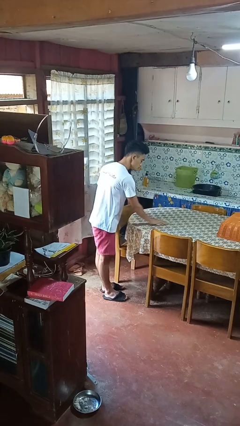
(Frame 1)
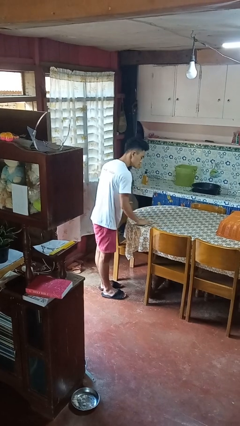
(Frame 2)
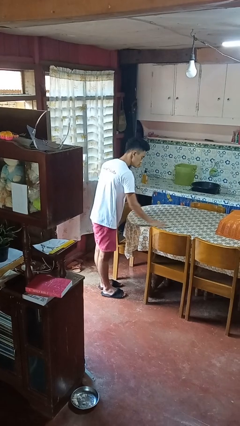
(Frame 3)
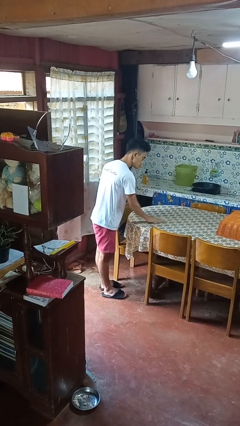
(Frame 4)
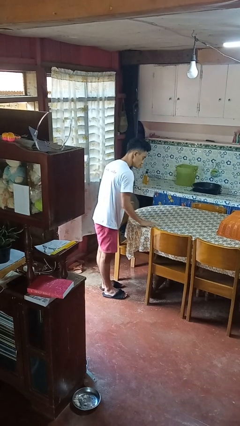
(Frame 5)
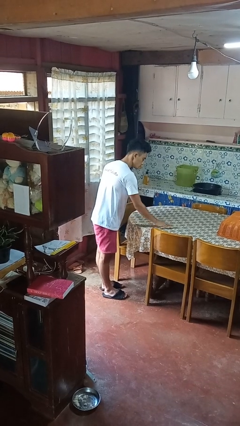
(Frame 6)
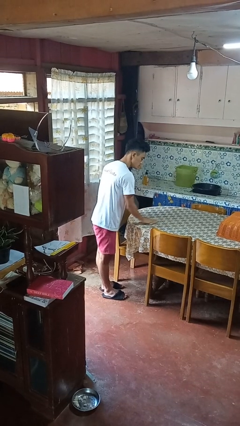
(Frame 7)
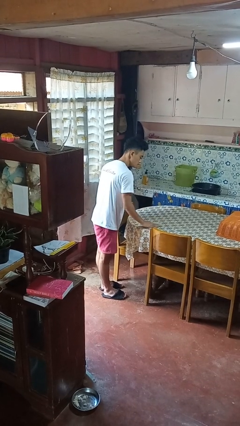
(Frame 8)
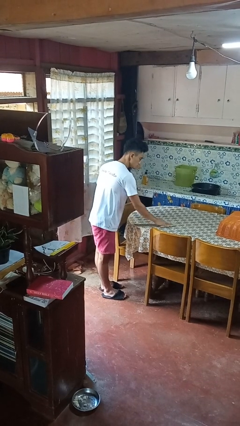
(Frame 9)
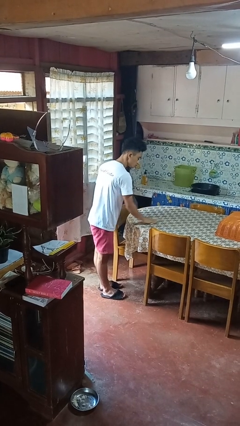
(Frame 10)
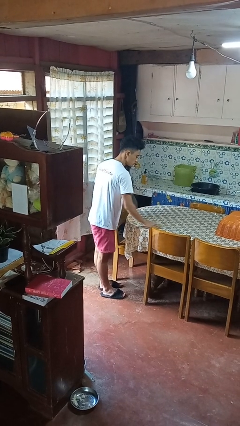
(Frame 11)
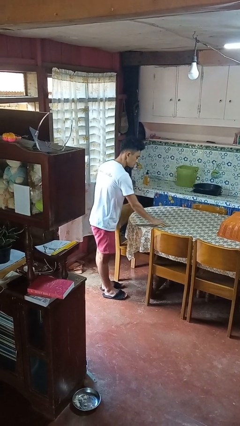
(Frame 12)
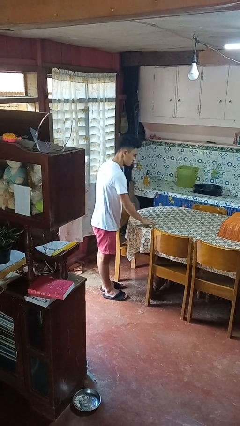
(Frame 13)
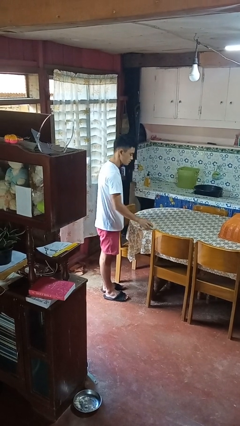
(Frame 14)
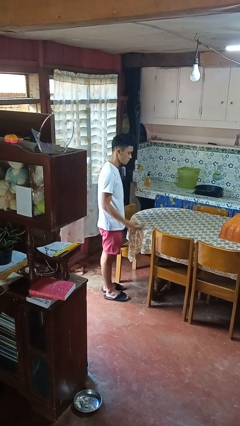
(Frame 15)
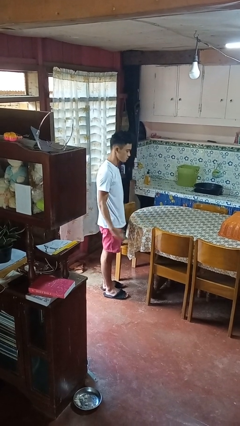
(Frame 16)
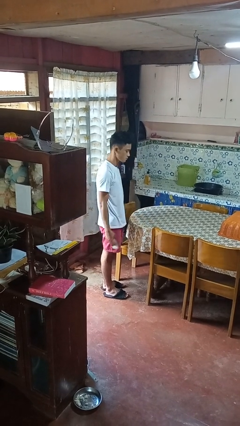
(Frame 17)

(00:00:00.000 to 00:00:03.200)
person cleans table with rag

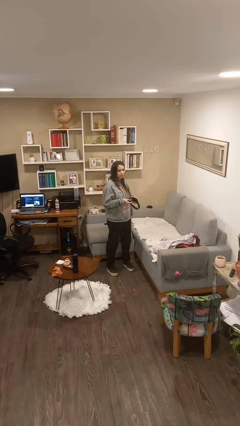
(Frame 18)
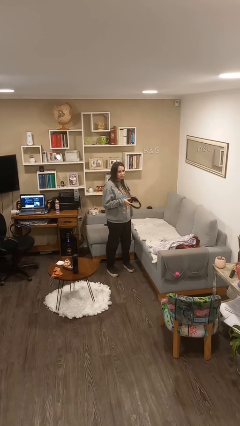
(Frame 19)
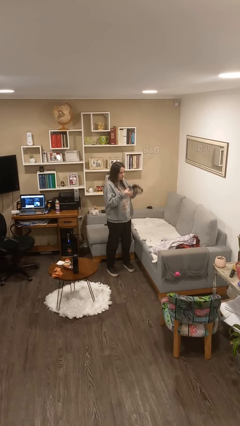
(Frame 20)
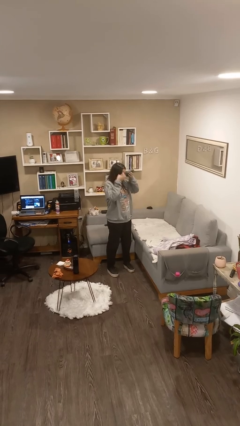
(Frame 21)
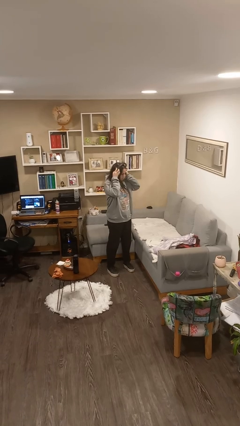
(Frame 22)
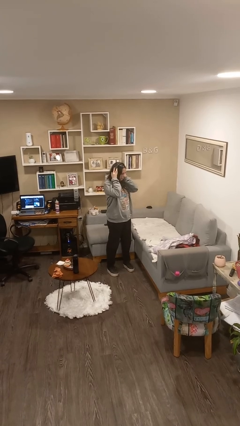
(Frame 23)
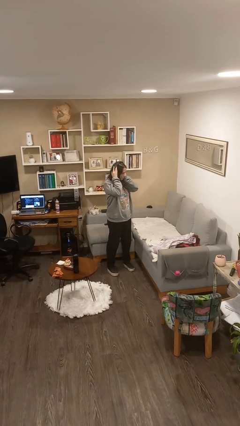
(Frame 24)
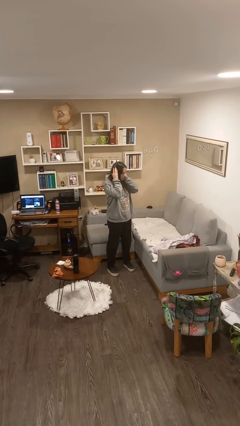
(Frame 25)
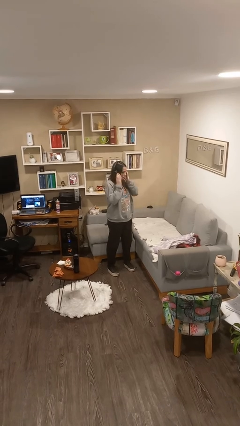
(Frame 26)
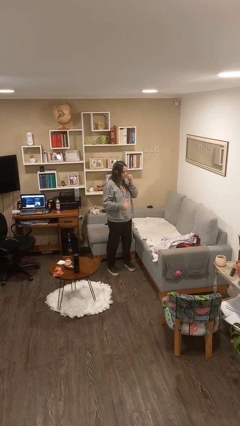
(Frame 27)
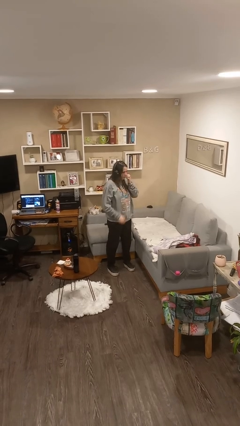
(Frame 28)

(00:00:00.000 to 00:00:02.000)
person puts on headphones

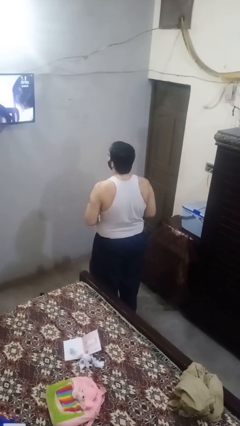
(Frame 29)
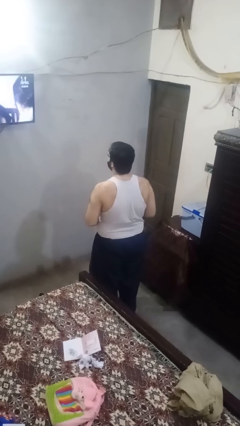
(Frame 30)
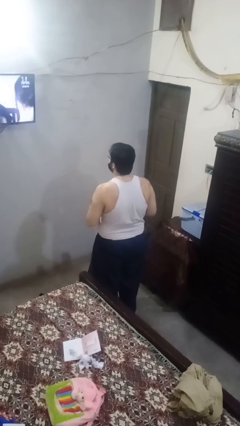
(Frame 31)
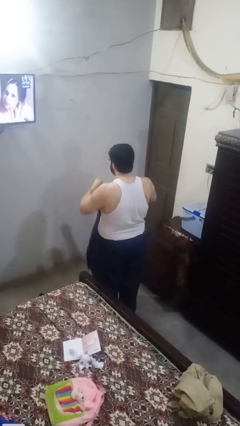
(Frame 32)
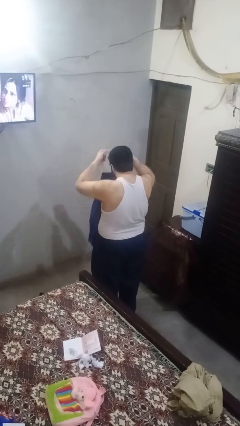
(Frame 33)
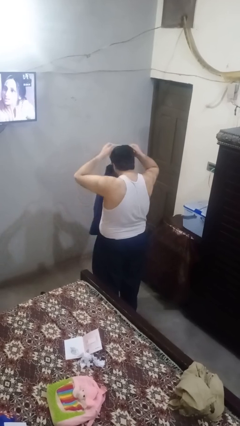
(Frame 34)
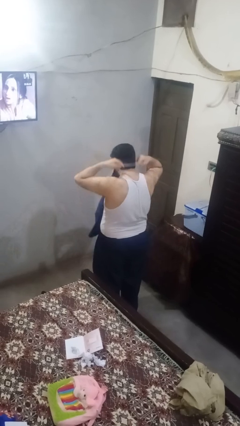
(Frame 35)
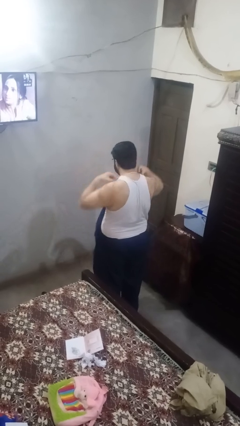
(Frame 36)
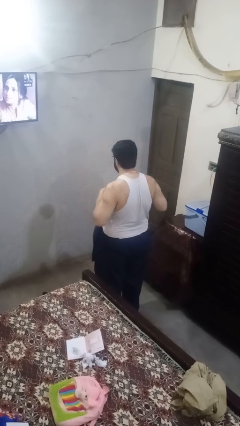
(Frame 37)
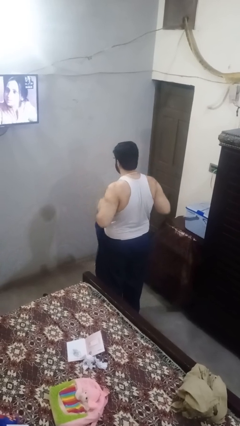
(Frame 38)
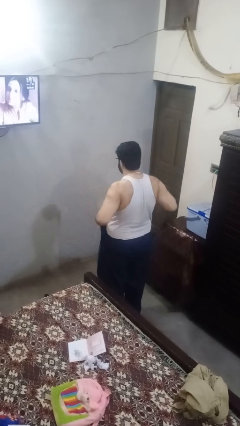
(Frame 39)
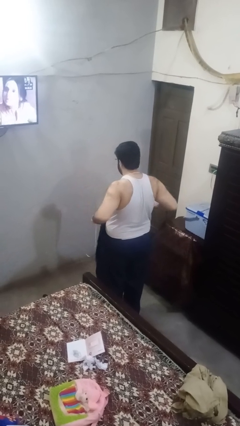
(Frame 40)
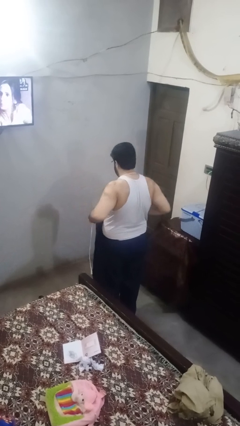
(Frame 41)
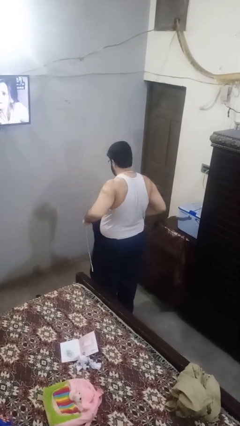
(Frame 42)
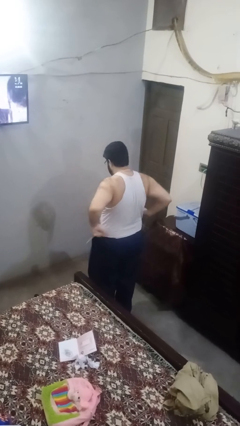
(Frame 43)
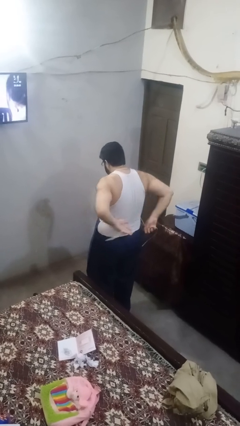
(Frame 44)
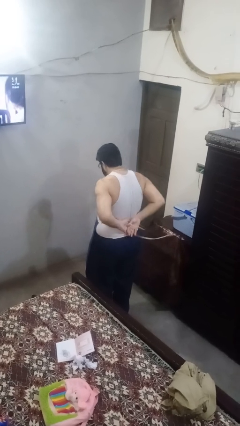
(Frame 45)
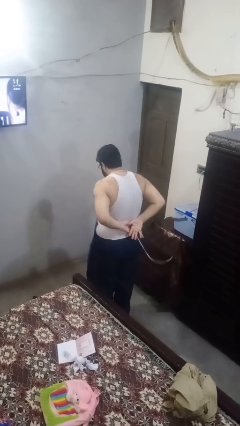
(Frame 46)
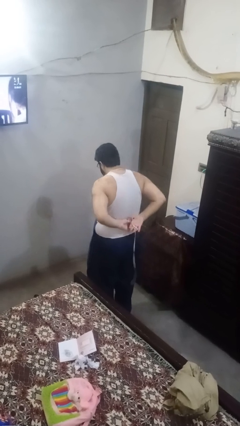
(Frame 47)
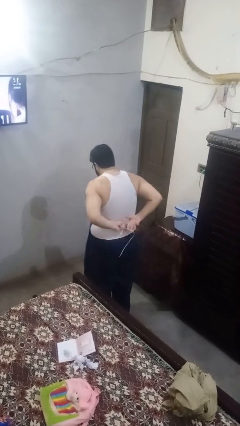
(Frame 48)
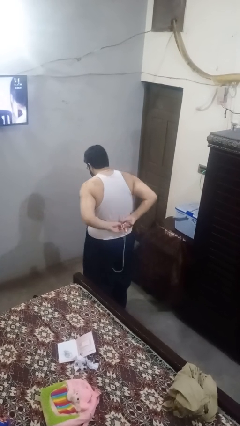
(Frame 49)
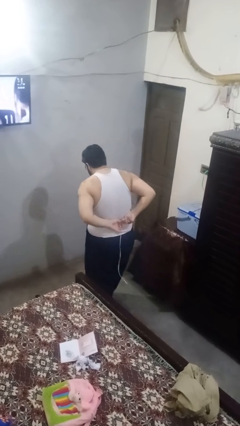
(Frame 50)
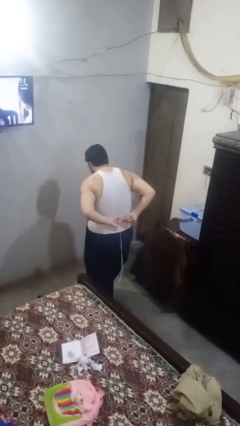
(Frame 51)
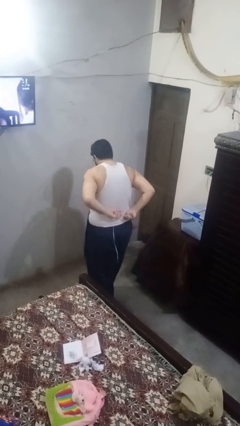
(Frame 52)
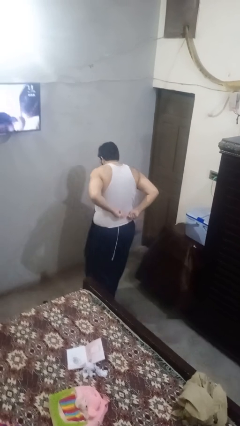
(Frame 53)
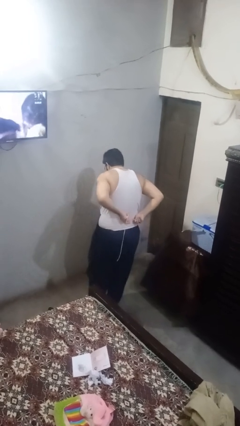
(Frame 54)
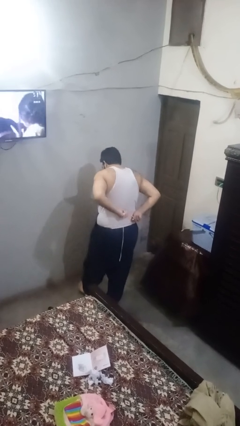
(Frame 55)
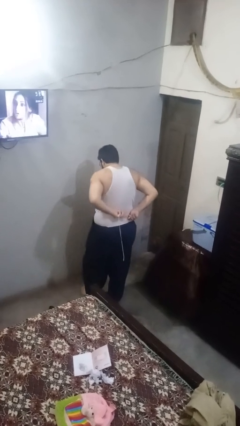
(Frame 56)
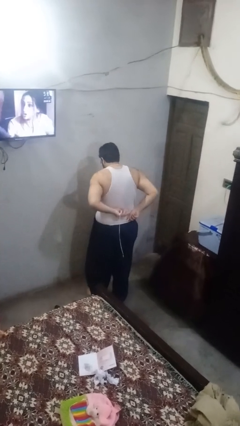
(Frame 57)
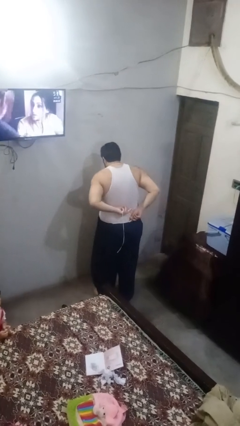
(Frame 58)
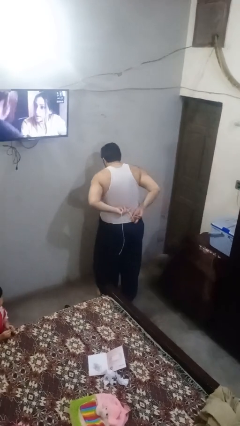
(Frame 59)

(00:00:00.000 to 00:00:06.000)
person puts on apron

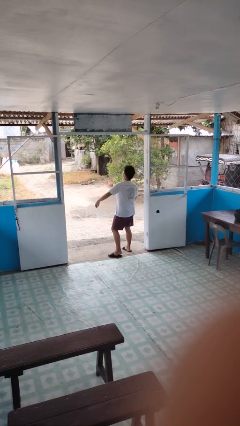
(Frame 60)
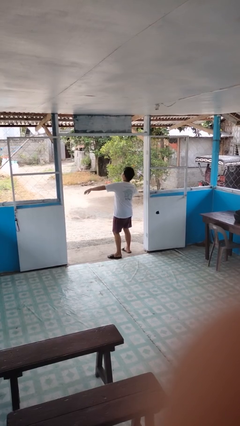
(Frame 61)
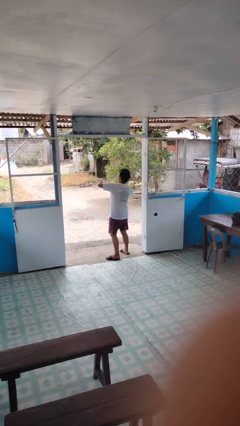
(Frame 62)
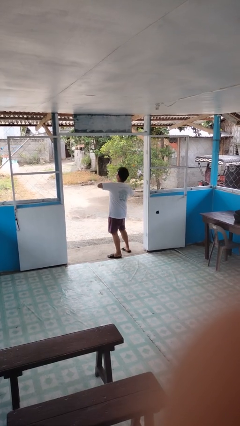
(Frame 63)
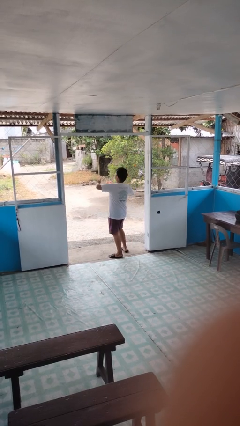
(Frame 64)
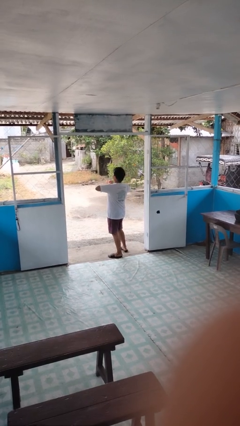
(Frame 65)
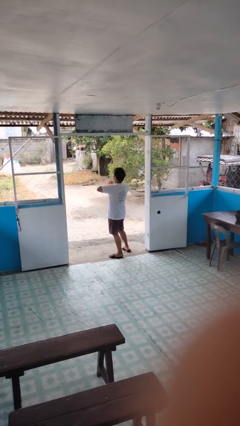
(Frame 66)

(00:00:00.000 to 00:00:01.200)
person drums on chest

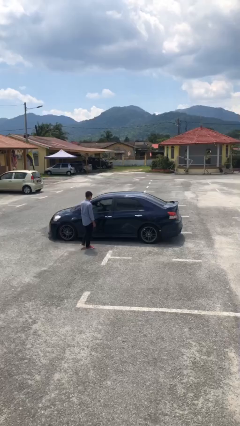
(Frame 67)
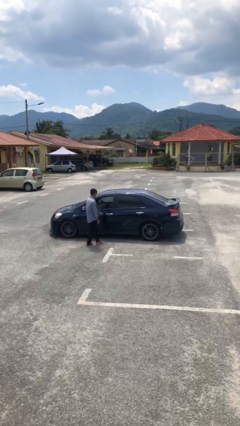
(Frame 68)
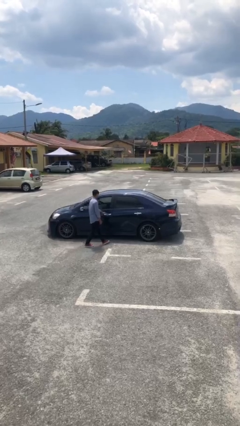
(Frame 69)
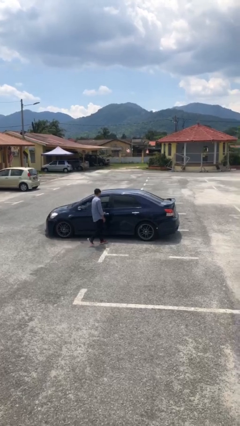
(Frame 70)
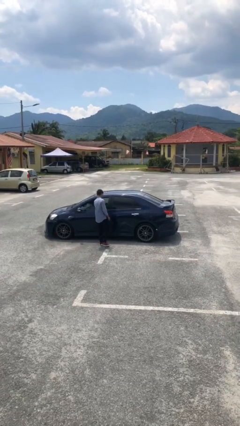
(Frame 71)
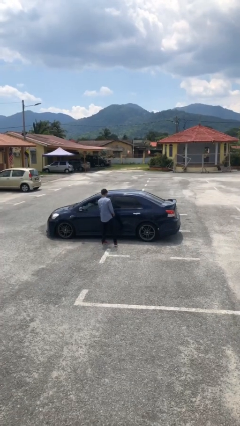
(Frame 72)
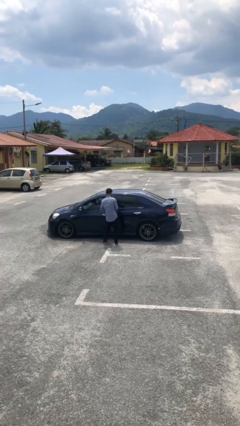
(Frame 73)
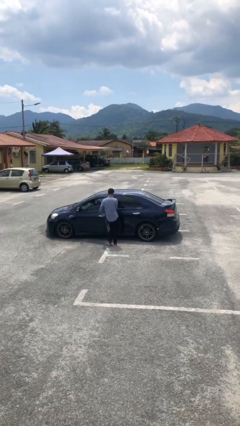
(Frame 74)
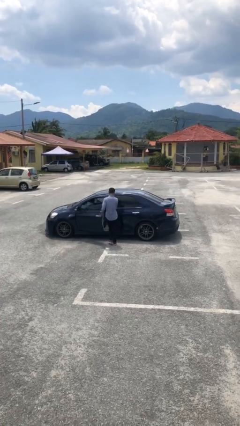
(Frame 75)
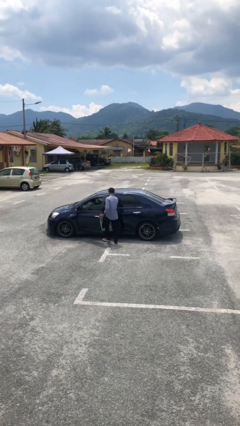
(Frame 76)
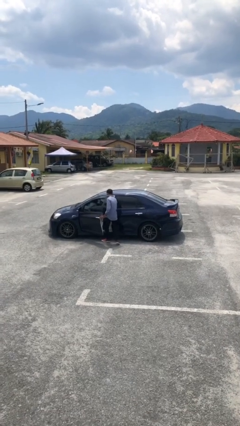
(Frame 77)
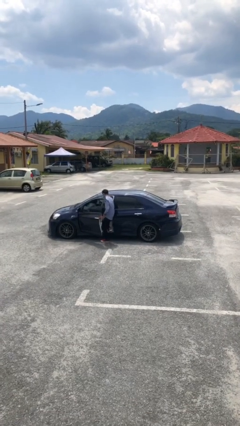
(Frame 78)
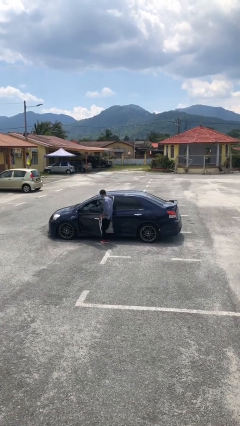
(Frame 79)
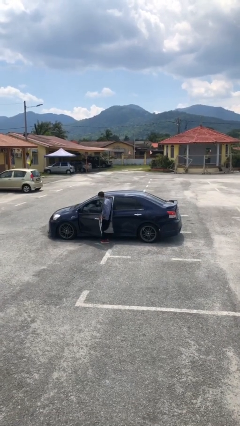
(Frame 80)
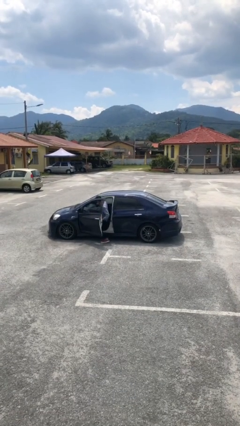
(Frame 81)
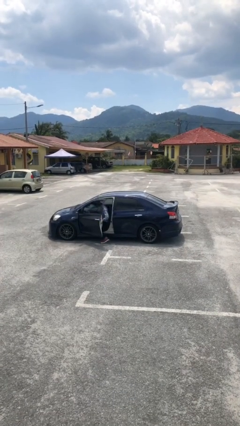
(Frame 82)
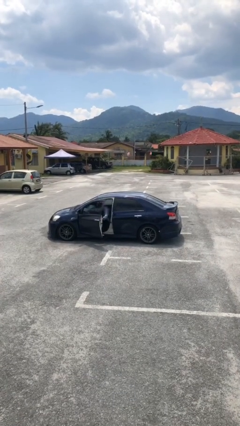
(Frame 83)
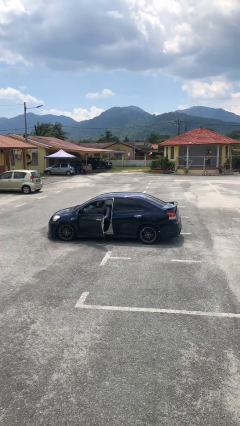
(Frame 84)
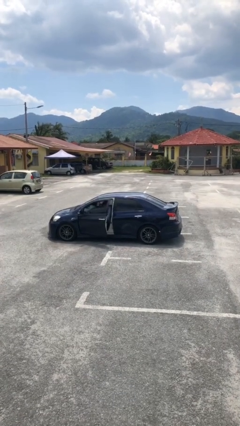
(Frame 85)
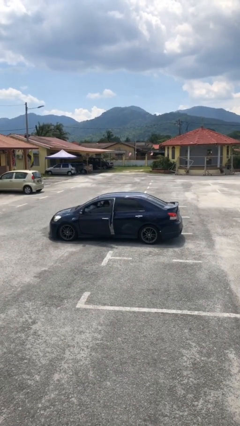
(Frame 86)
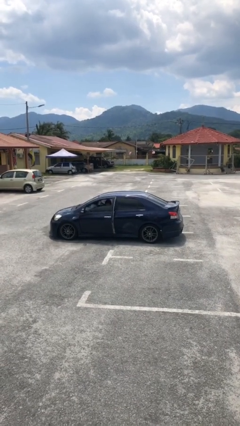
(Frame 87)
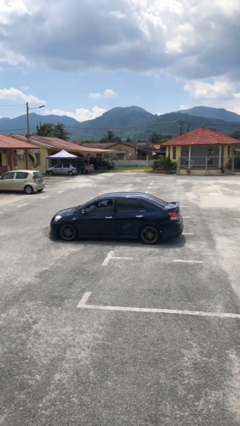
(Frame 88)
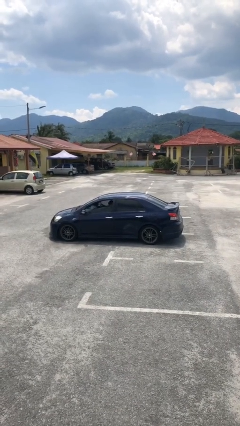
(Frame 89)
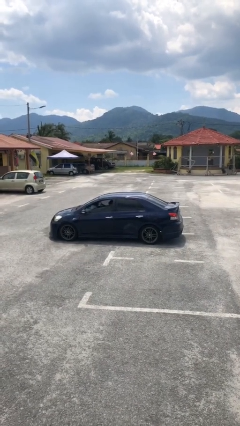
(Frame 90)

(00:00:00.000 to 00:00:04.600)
car picks up person

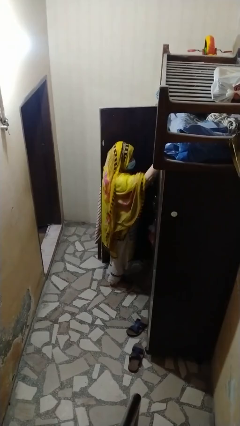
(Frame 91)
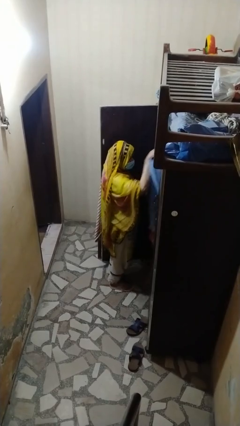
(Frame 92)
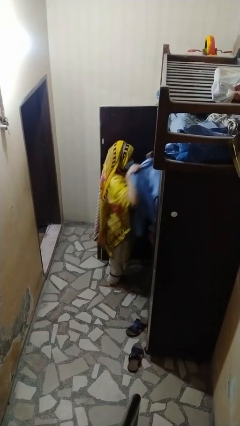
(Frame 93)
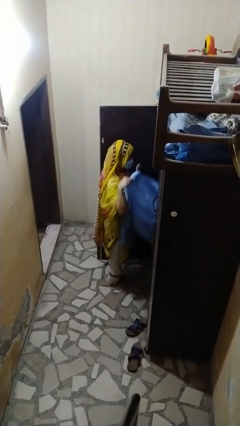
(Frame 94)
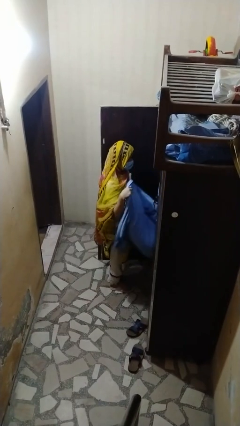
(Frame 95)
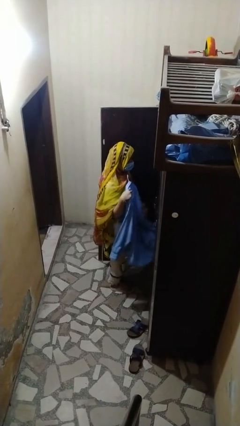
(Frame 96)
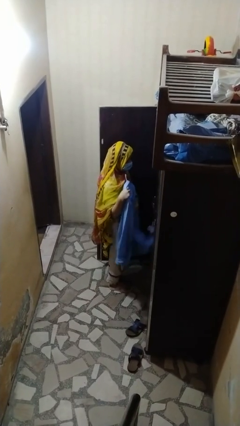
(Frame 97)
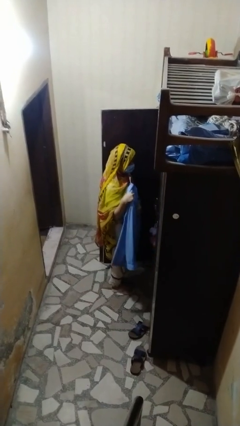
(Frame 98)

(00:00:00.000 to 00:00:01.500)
person takes clothes from closet
